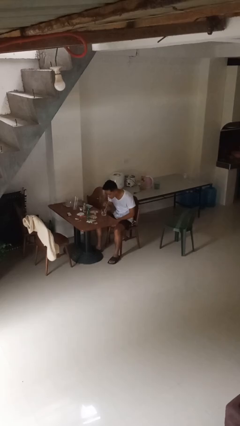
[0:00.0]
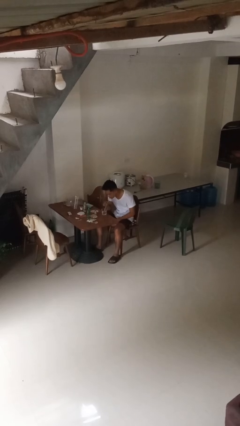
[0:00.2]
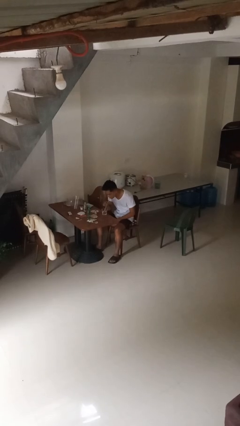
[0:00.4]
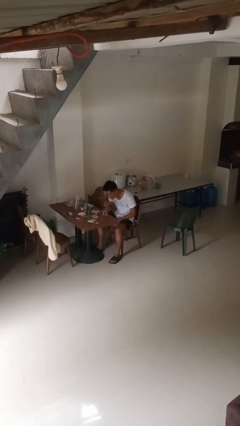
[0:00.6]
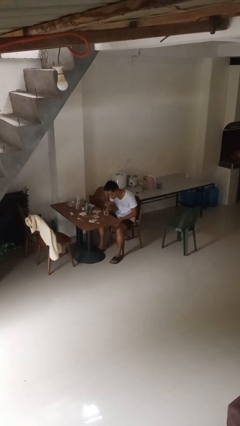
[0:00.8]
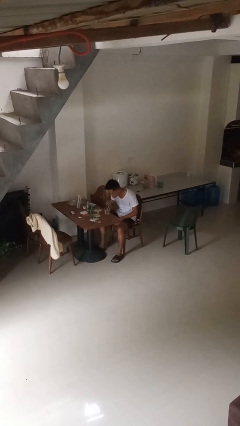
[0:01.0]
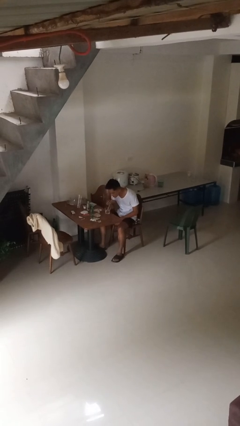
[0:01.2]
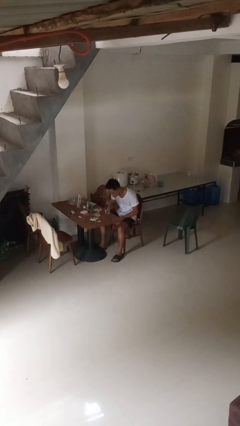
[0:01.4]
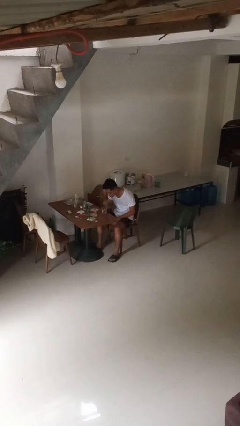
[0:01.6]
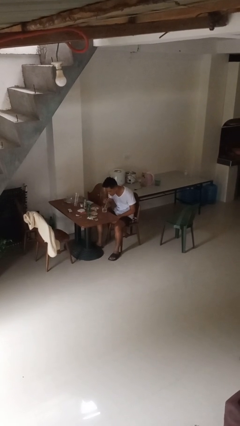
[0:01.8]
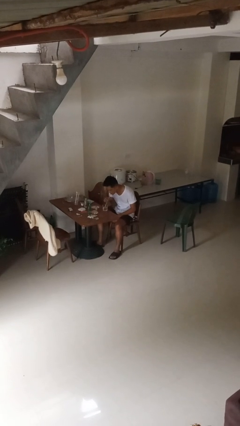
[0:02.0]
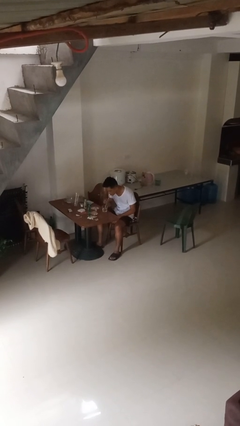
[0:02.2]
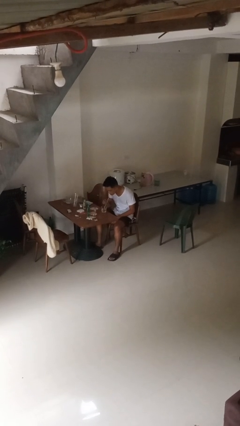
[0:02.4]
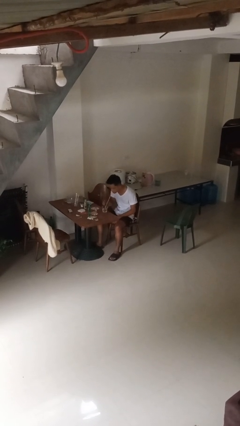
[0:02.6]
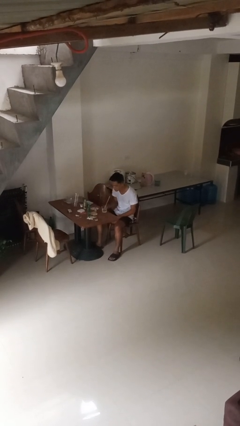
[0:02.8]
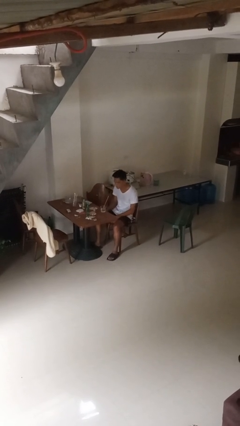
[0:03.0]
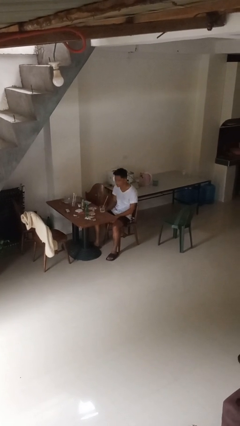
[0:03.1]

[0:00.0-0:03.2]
person drinks from straw

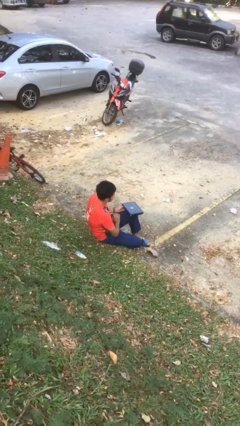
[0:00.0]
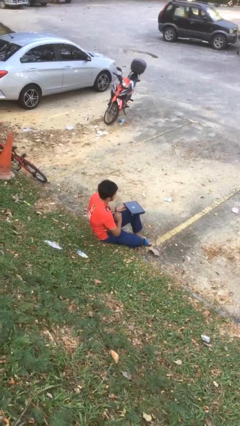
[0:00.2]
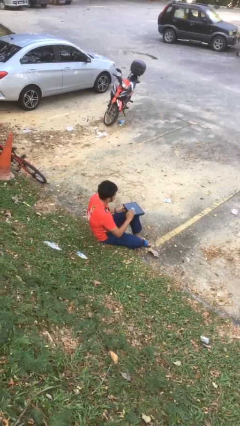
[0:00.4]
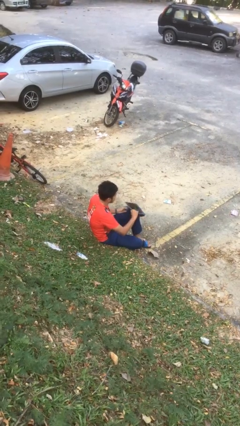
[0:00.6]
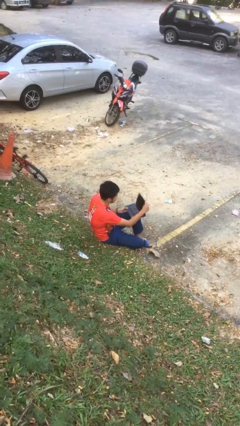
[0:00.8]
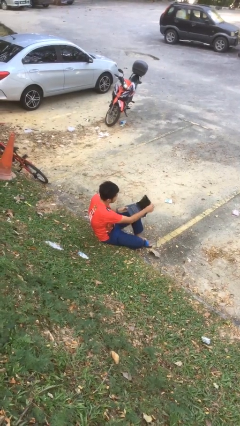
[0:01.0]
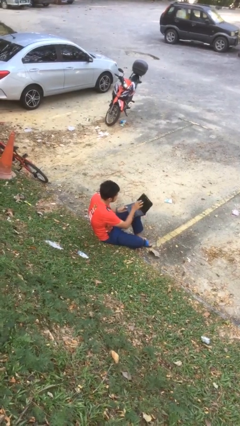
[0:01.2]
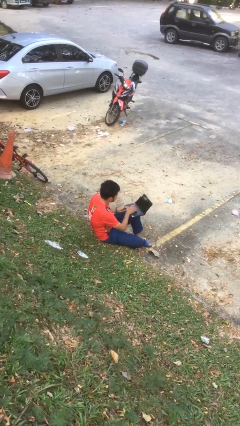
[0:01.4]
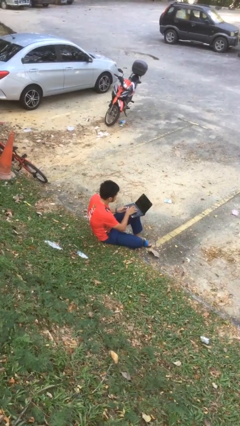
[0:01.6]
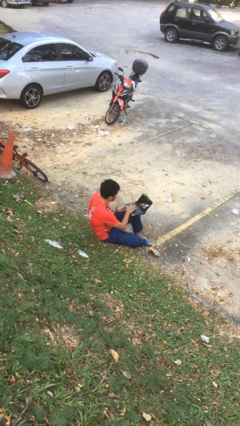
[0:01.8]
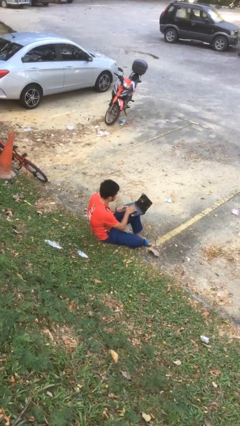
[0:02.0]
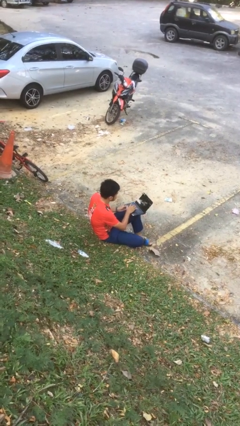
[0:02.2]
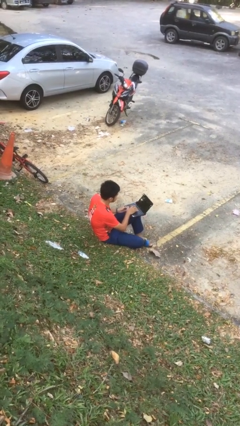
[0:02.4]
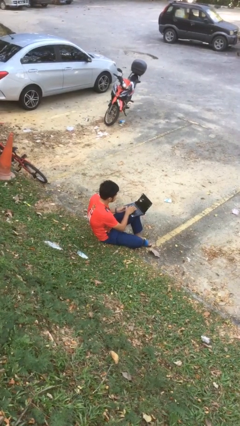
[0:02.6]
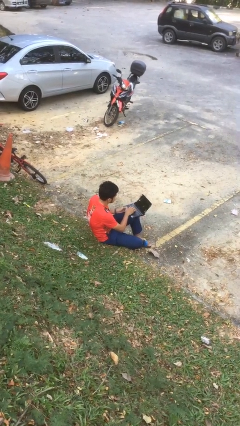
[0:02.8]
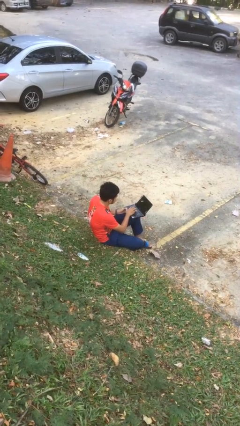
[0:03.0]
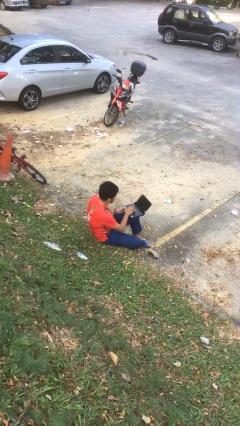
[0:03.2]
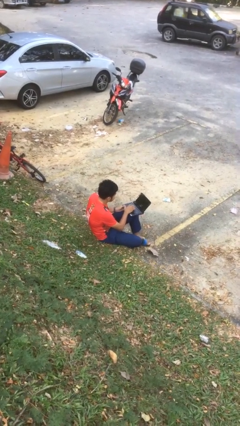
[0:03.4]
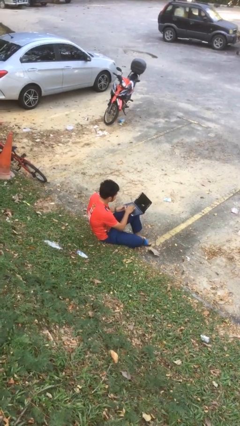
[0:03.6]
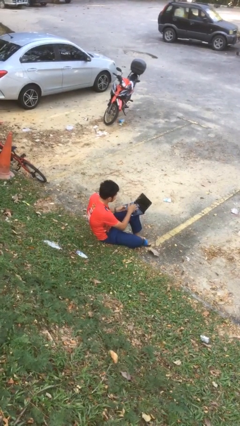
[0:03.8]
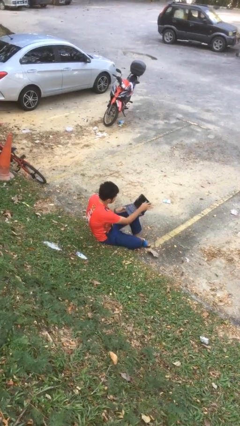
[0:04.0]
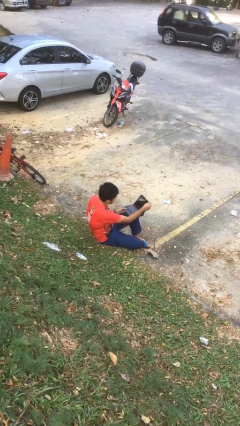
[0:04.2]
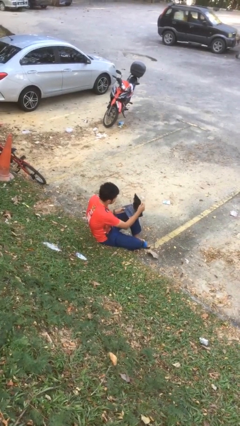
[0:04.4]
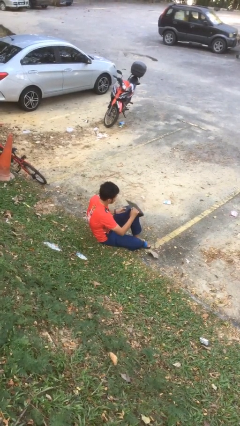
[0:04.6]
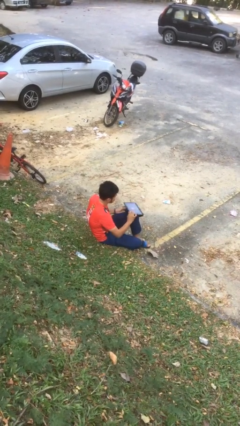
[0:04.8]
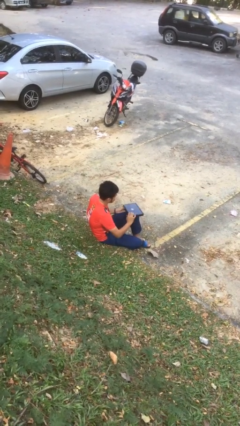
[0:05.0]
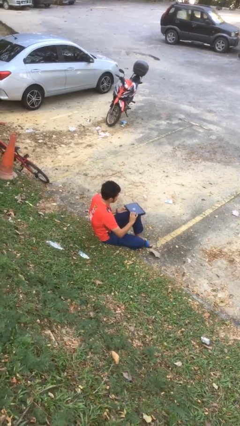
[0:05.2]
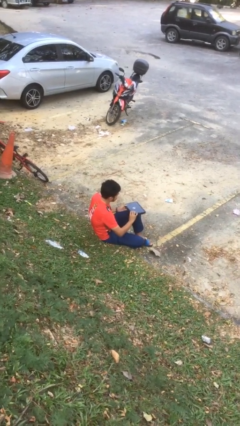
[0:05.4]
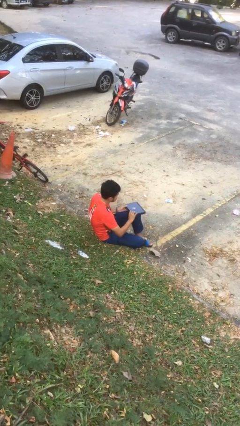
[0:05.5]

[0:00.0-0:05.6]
person interacts with laptop

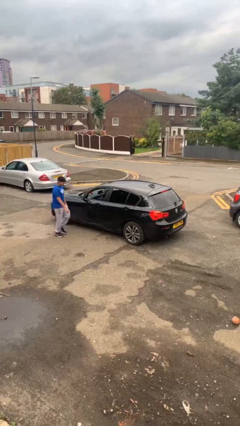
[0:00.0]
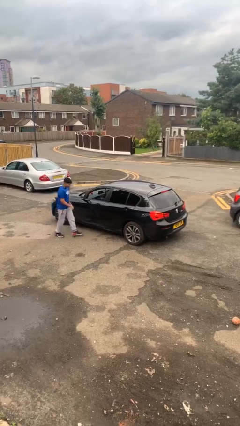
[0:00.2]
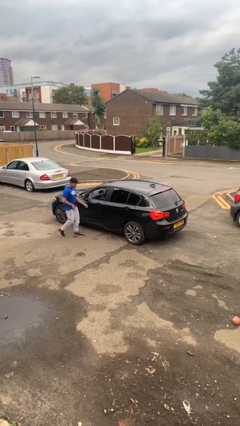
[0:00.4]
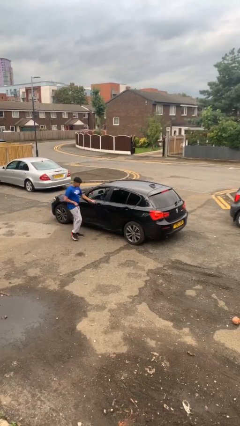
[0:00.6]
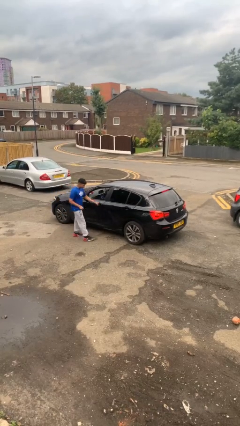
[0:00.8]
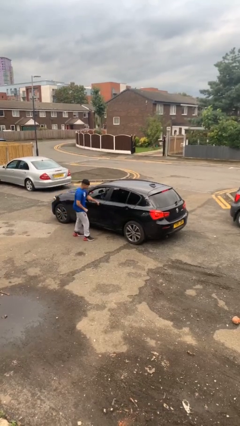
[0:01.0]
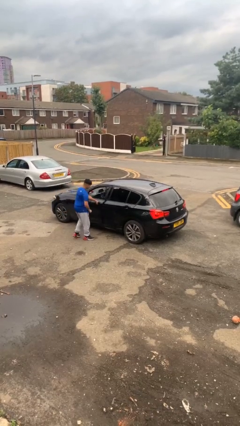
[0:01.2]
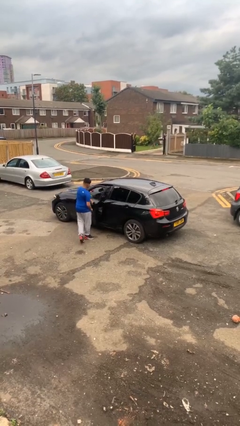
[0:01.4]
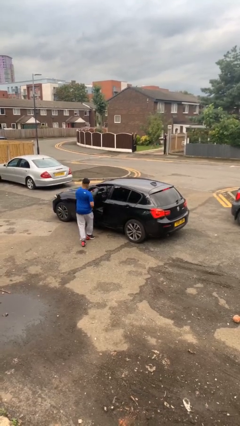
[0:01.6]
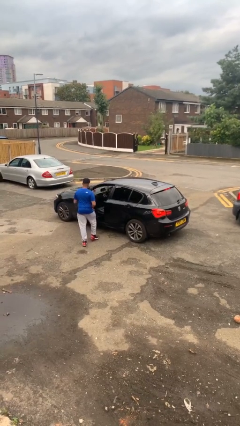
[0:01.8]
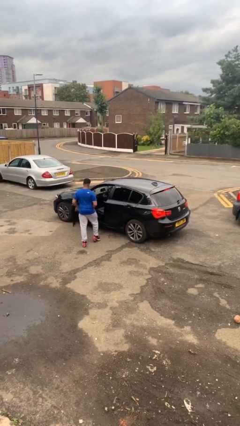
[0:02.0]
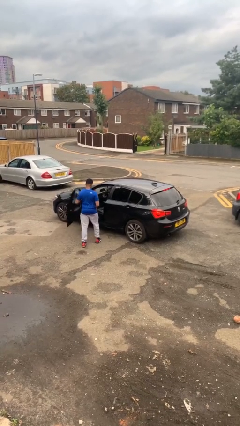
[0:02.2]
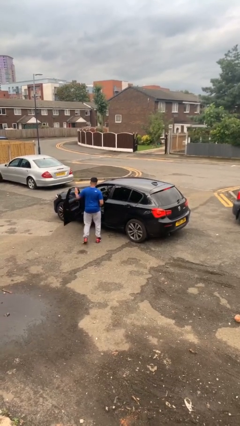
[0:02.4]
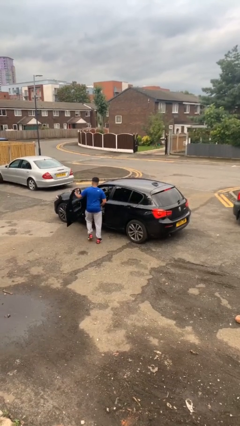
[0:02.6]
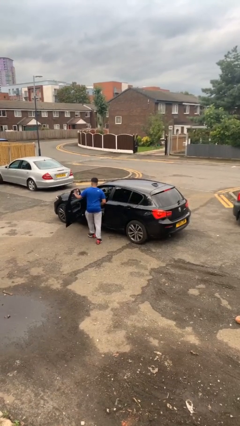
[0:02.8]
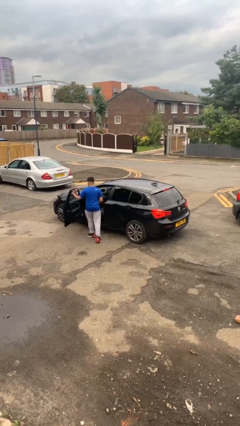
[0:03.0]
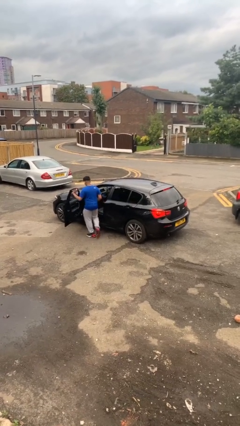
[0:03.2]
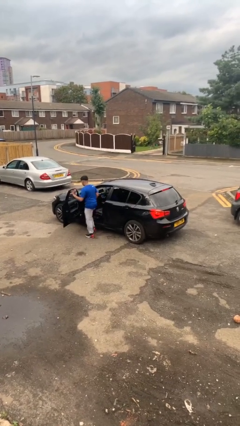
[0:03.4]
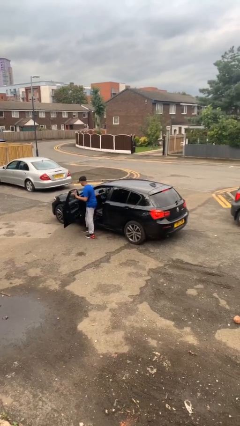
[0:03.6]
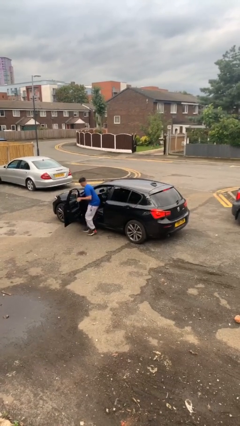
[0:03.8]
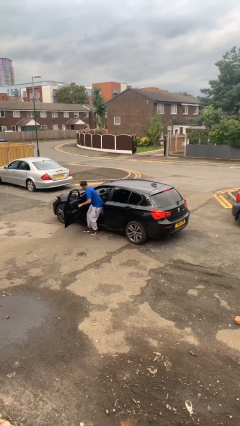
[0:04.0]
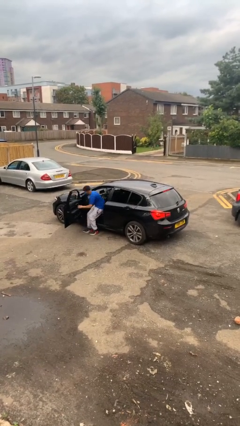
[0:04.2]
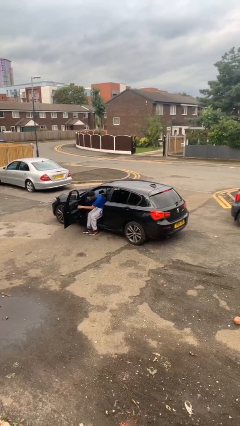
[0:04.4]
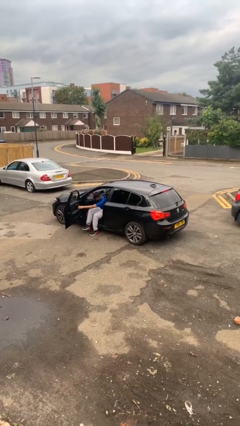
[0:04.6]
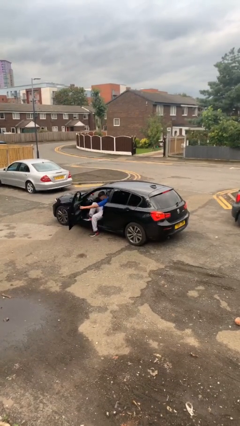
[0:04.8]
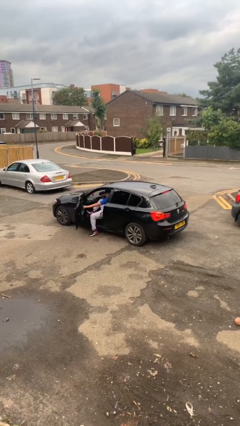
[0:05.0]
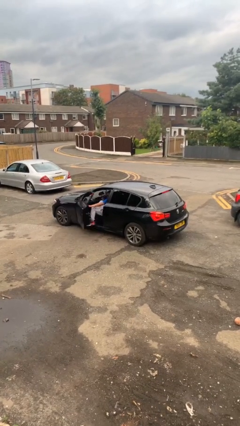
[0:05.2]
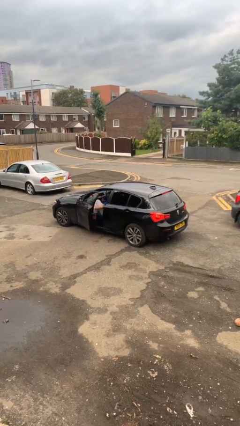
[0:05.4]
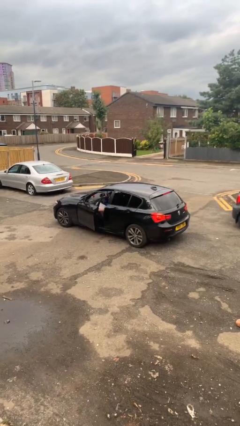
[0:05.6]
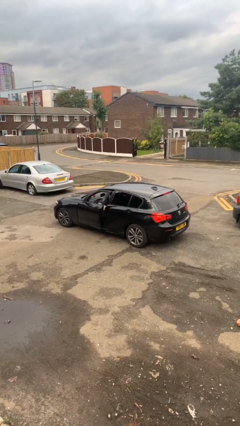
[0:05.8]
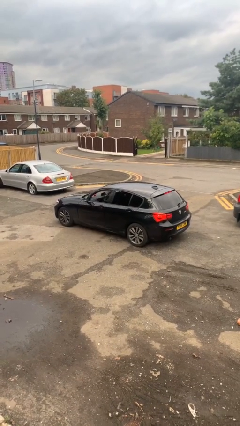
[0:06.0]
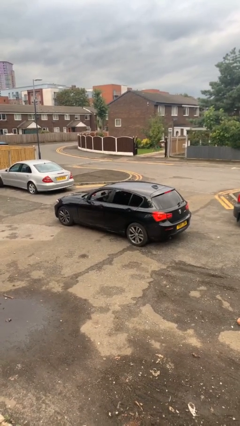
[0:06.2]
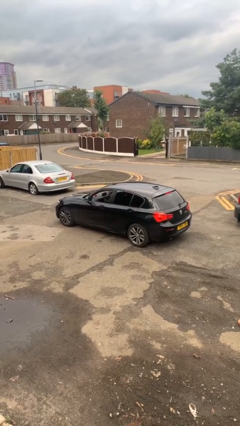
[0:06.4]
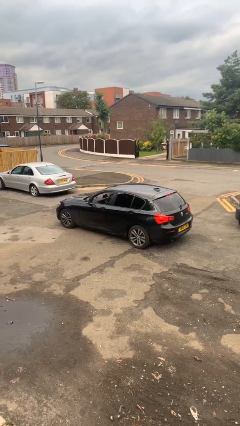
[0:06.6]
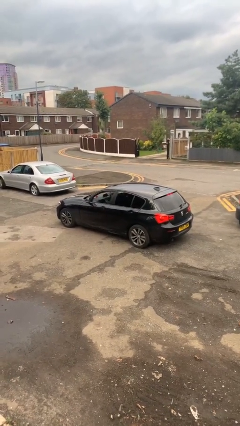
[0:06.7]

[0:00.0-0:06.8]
car picks up person

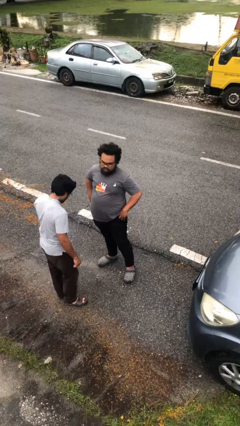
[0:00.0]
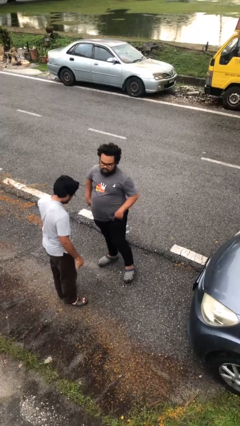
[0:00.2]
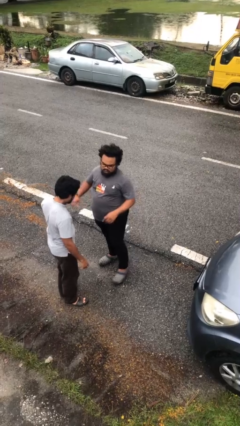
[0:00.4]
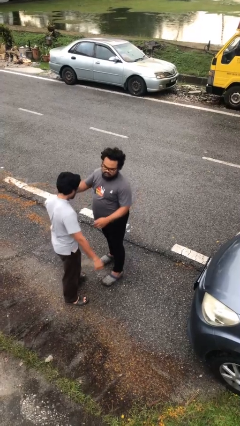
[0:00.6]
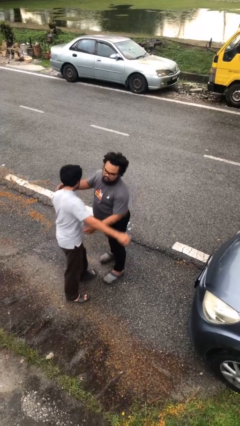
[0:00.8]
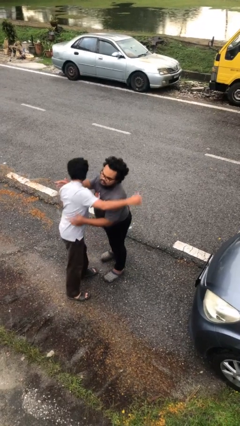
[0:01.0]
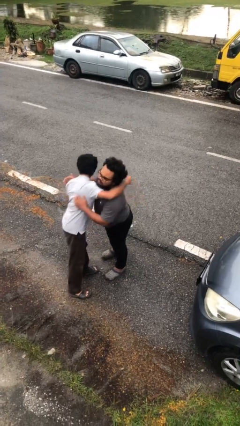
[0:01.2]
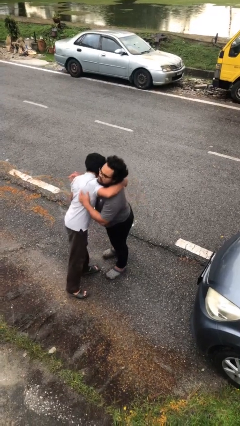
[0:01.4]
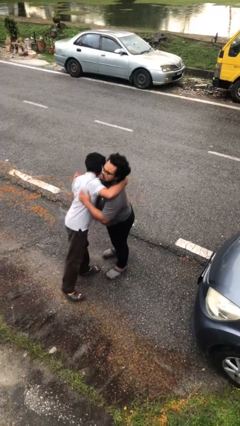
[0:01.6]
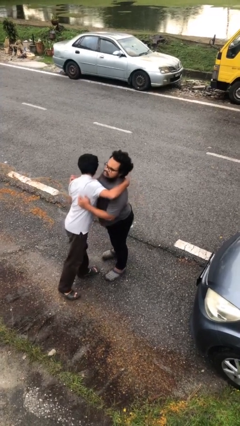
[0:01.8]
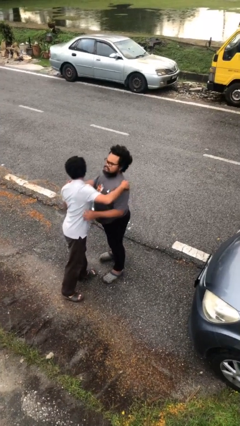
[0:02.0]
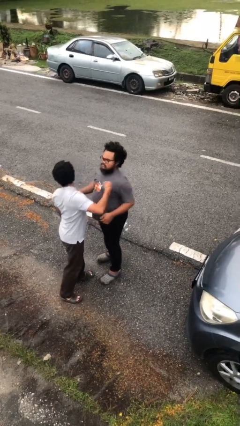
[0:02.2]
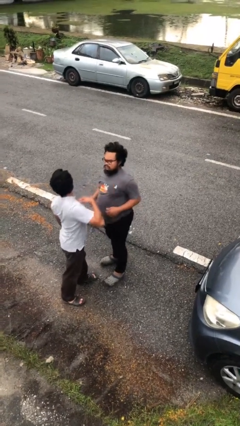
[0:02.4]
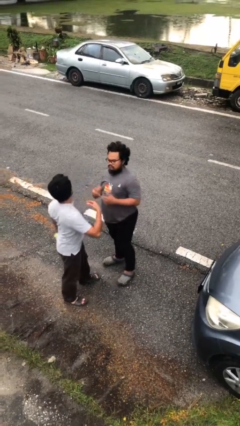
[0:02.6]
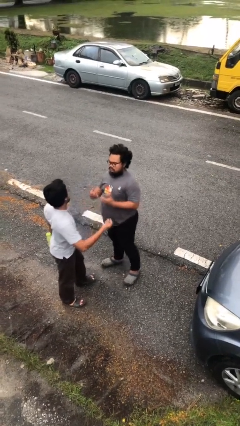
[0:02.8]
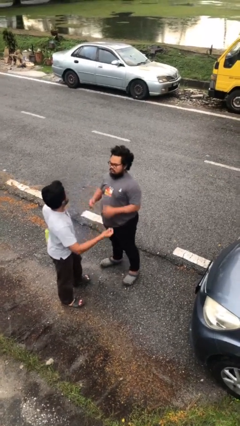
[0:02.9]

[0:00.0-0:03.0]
person embraces person
